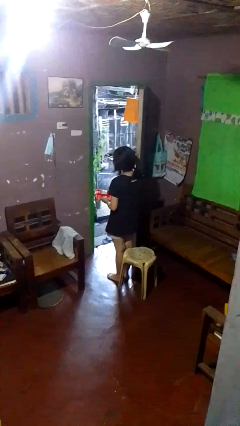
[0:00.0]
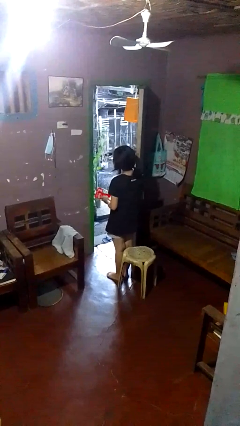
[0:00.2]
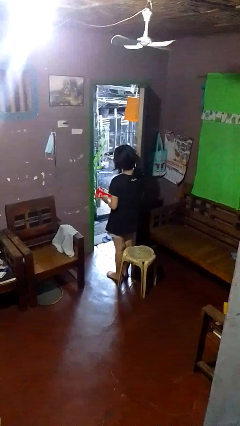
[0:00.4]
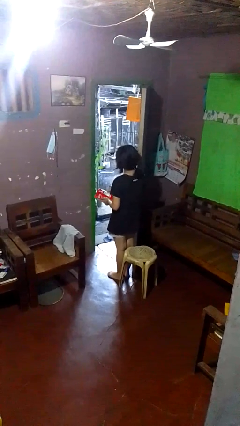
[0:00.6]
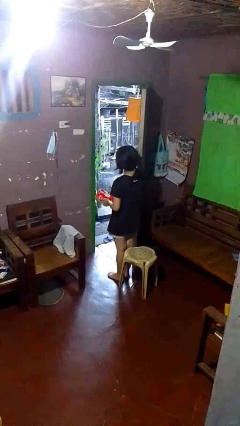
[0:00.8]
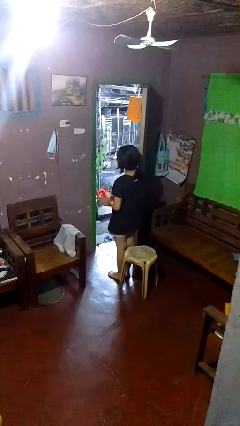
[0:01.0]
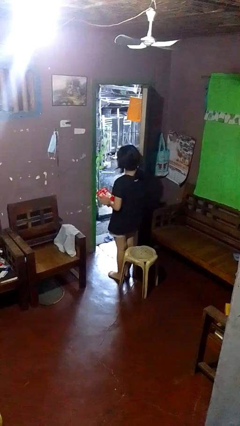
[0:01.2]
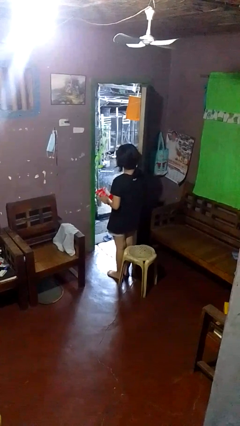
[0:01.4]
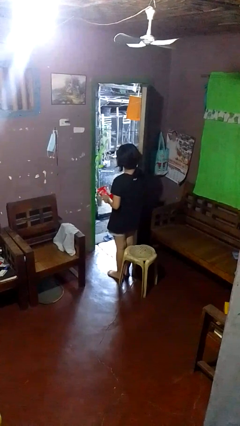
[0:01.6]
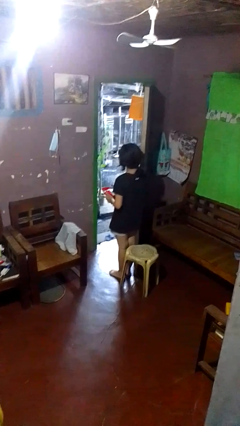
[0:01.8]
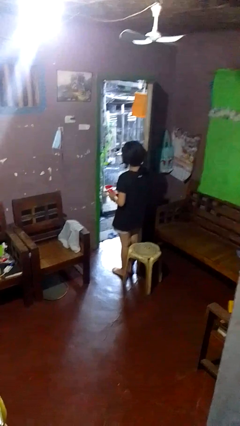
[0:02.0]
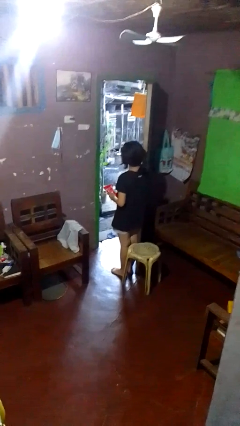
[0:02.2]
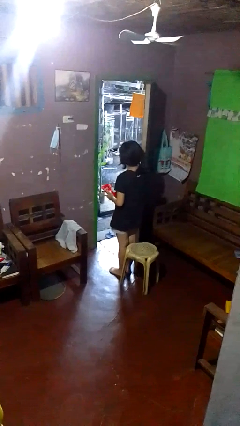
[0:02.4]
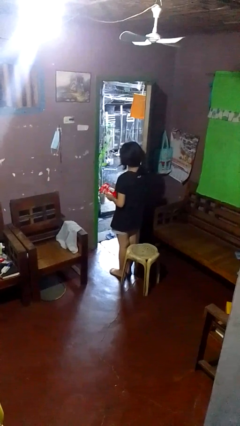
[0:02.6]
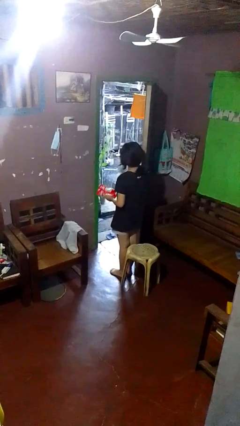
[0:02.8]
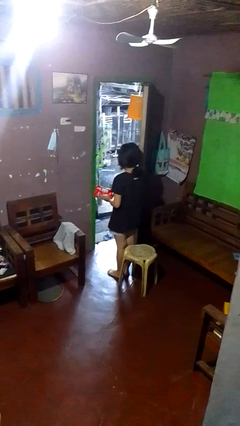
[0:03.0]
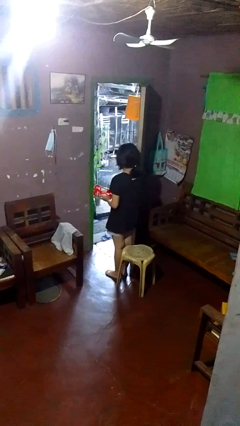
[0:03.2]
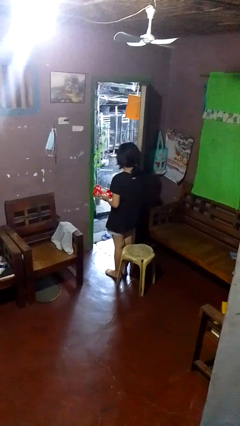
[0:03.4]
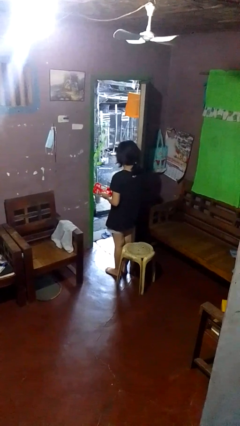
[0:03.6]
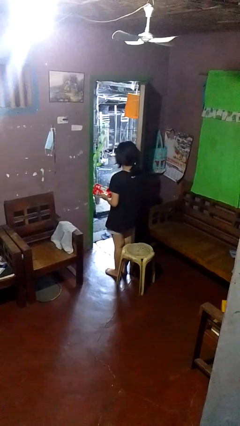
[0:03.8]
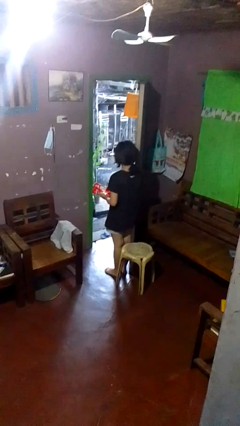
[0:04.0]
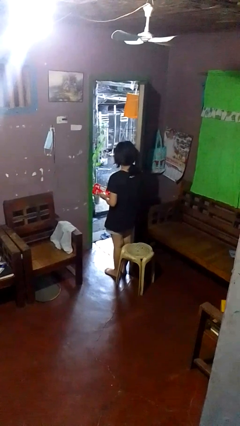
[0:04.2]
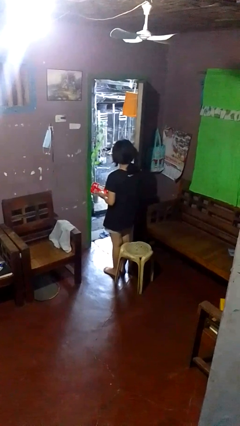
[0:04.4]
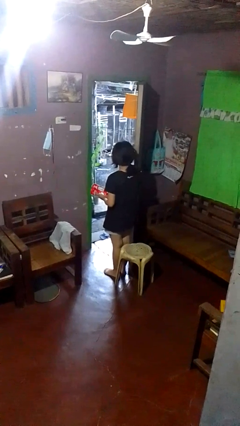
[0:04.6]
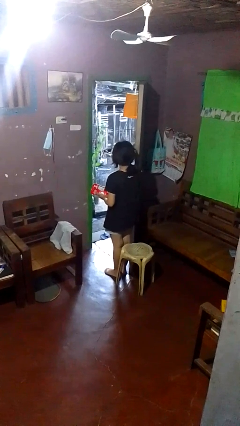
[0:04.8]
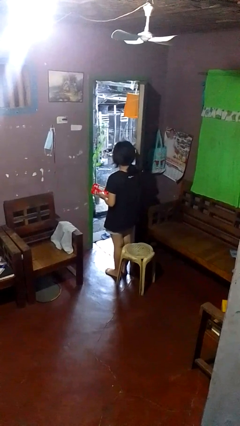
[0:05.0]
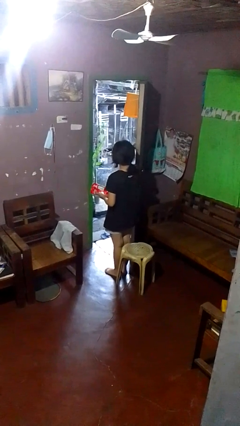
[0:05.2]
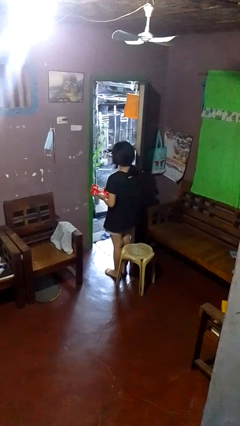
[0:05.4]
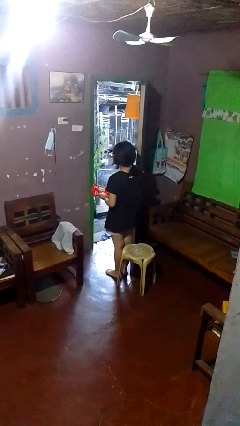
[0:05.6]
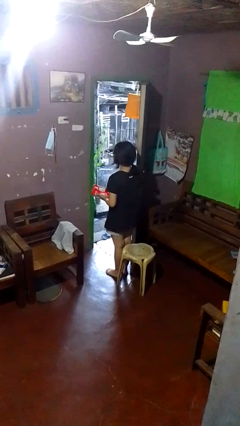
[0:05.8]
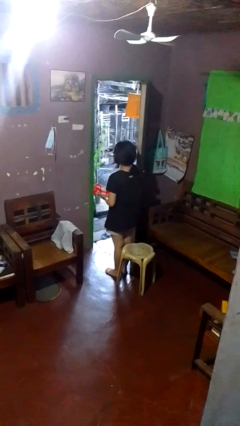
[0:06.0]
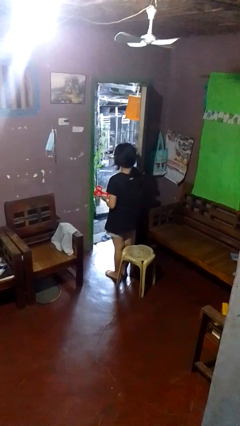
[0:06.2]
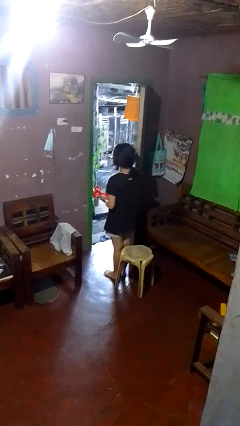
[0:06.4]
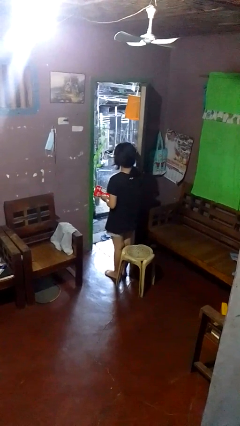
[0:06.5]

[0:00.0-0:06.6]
person eats snack from bag

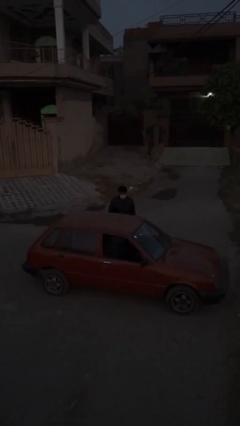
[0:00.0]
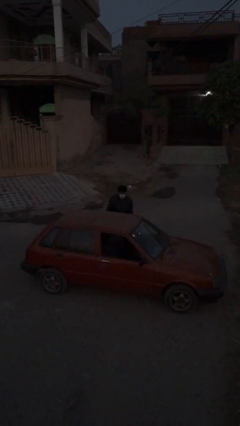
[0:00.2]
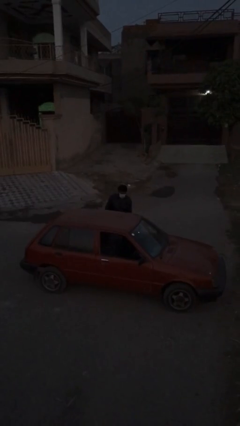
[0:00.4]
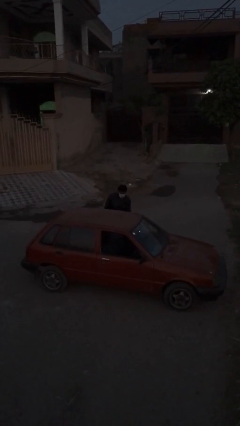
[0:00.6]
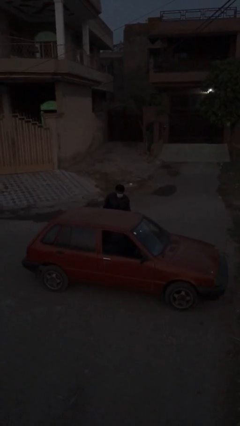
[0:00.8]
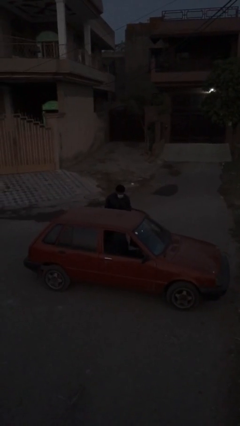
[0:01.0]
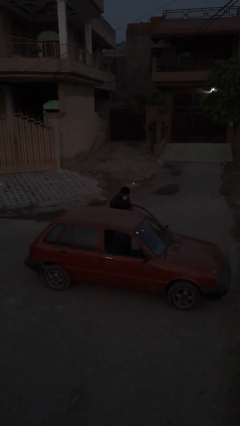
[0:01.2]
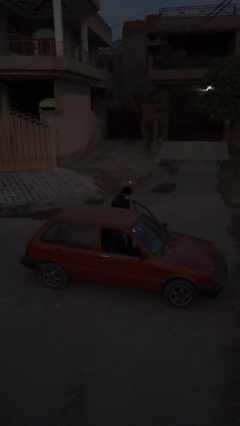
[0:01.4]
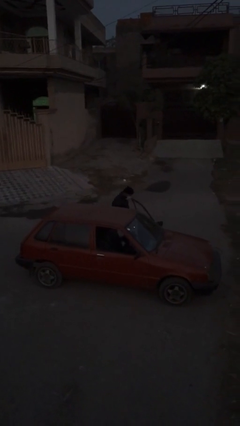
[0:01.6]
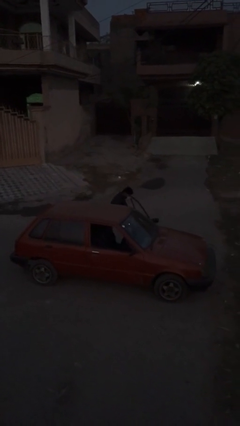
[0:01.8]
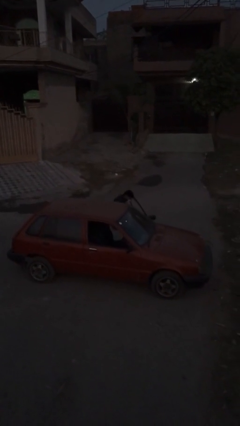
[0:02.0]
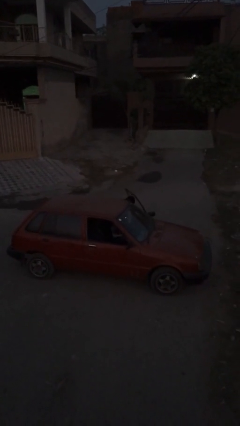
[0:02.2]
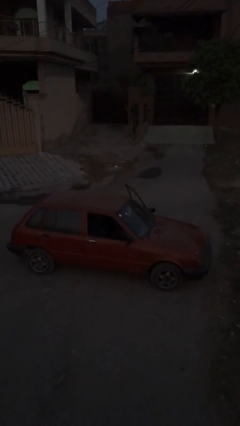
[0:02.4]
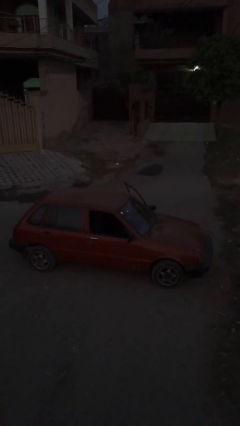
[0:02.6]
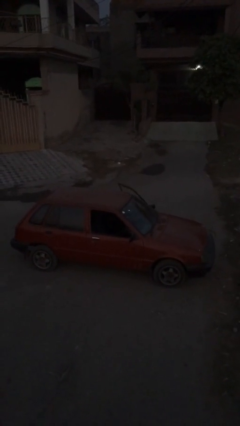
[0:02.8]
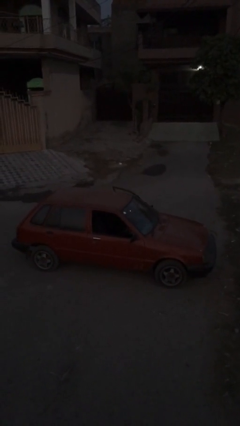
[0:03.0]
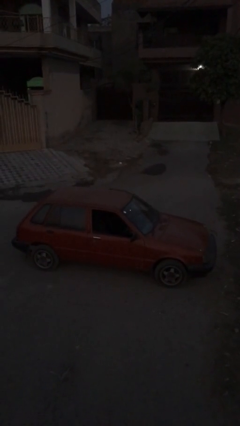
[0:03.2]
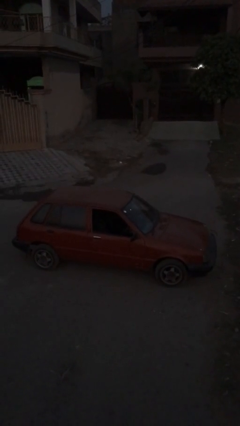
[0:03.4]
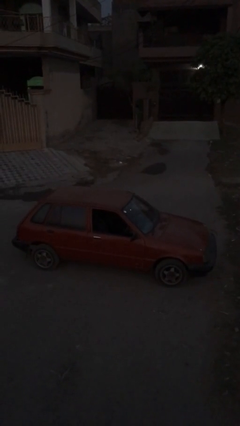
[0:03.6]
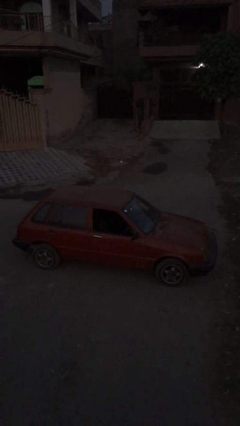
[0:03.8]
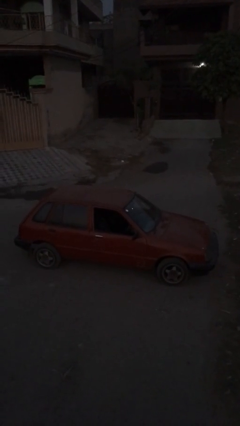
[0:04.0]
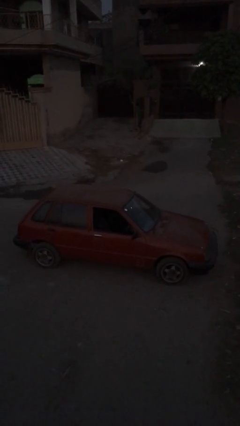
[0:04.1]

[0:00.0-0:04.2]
person enters car

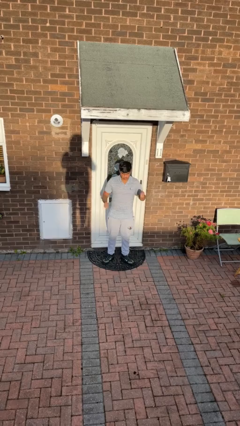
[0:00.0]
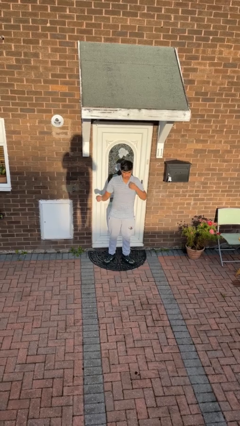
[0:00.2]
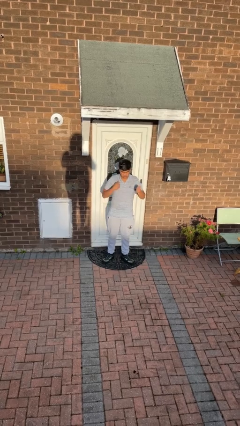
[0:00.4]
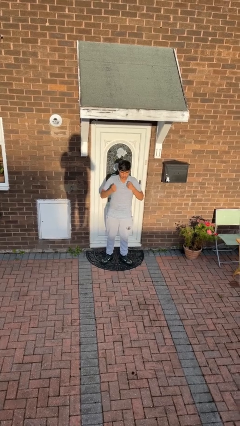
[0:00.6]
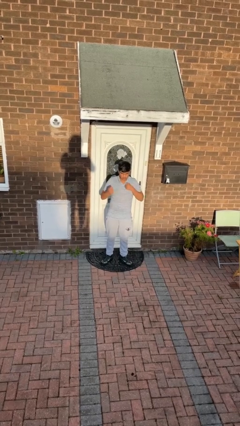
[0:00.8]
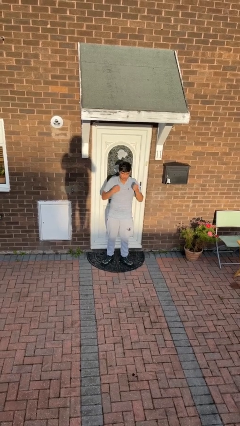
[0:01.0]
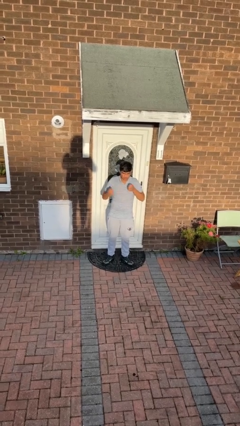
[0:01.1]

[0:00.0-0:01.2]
person drums on chest

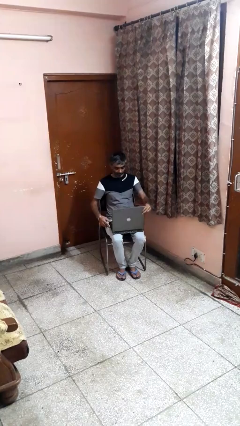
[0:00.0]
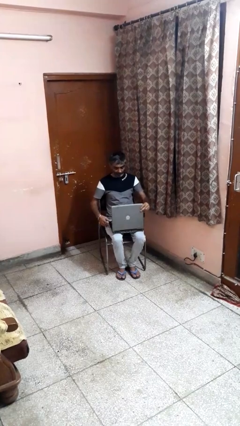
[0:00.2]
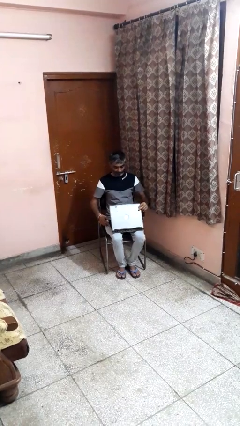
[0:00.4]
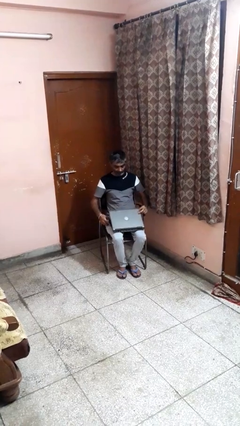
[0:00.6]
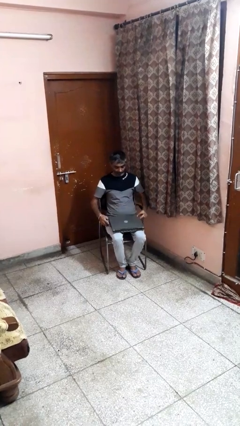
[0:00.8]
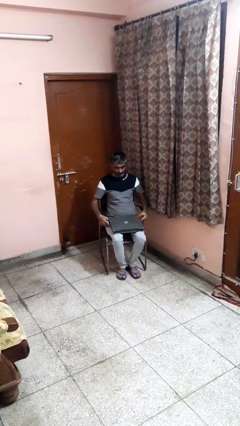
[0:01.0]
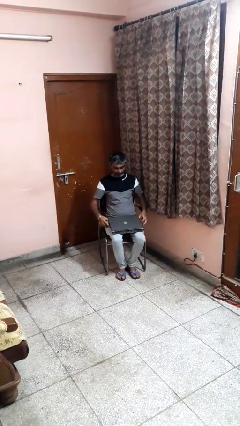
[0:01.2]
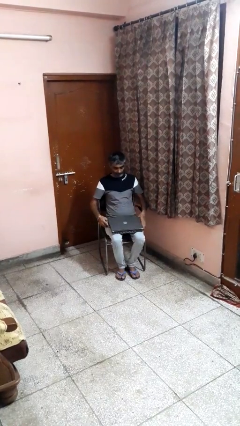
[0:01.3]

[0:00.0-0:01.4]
person closes laptop

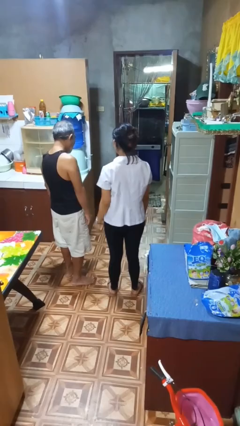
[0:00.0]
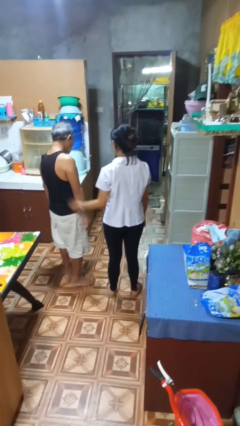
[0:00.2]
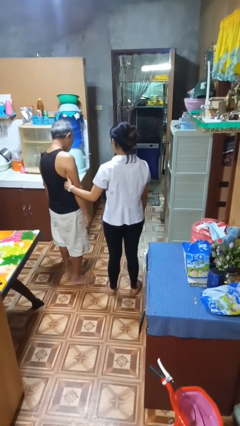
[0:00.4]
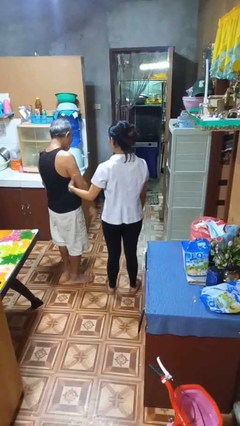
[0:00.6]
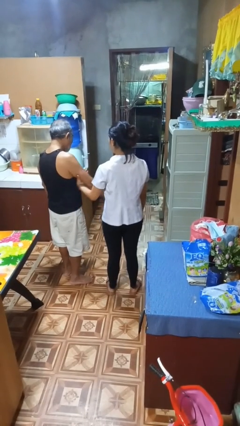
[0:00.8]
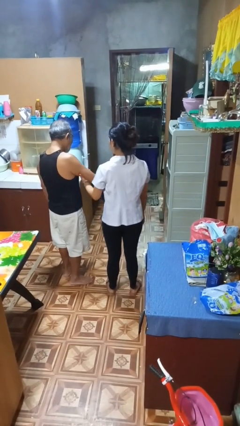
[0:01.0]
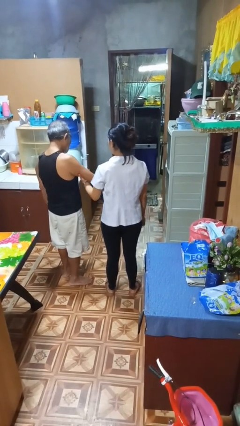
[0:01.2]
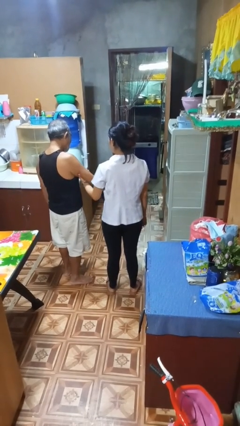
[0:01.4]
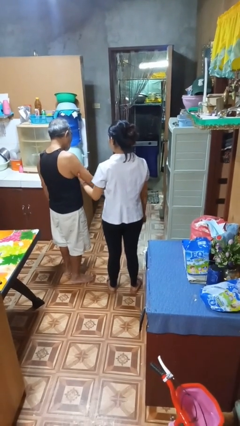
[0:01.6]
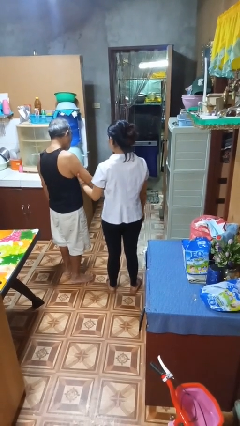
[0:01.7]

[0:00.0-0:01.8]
person grabs person by bicep

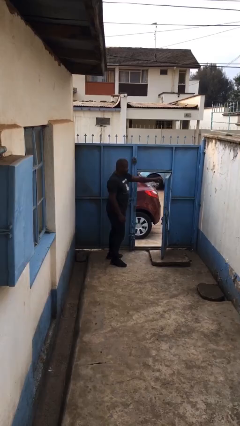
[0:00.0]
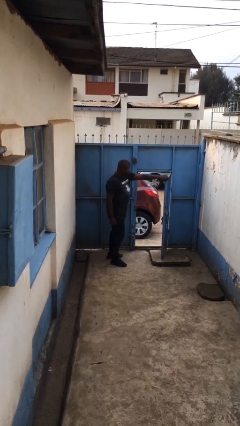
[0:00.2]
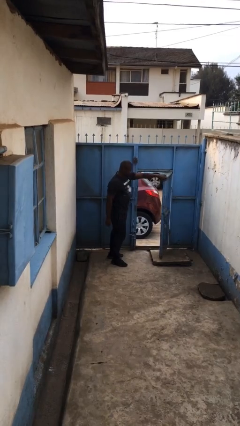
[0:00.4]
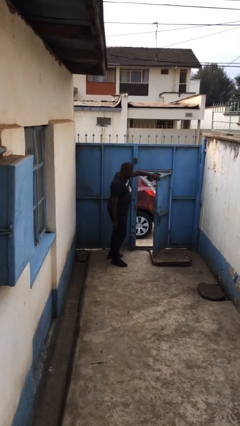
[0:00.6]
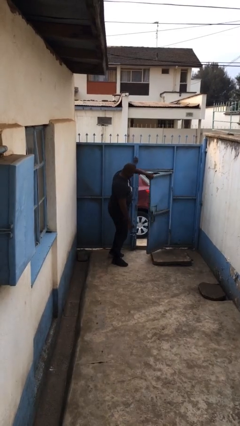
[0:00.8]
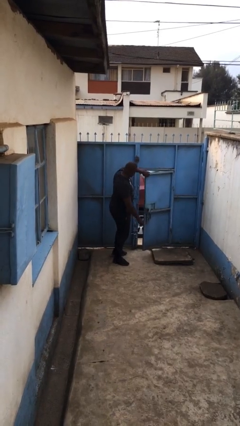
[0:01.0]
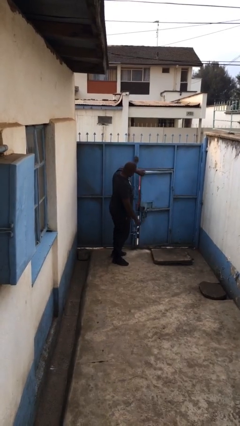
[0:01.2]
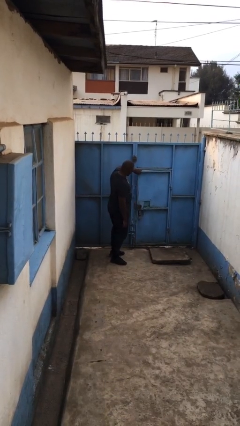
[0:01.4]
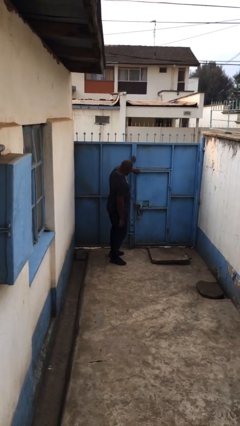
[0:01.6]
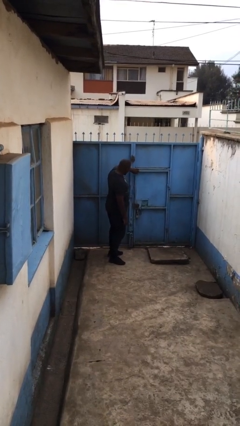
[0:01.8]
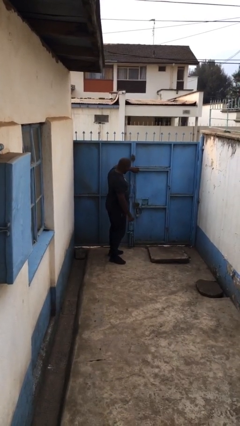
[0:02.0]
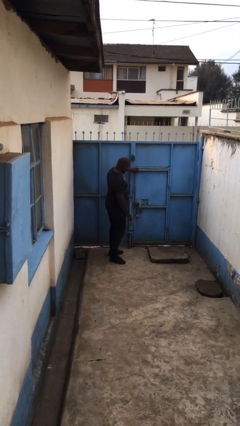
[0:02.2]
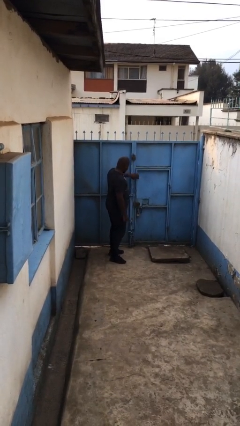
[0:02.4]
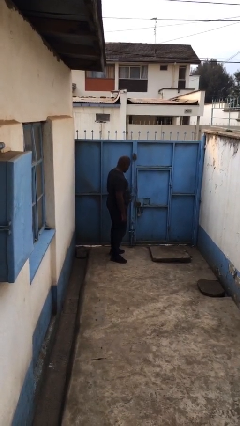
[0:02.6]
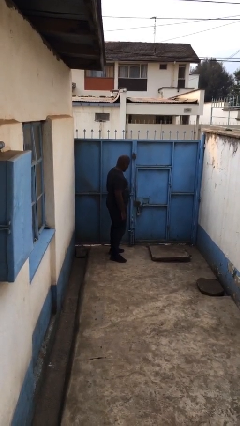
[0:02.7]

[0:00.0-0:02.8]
person closes gate
